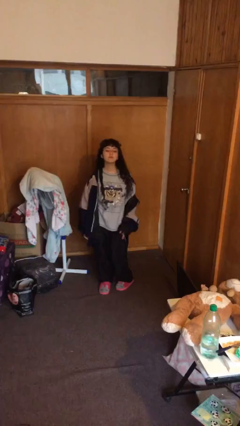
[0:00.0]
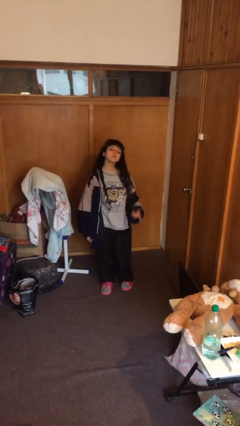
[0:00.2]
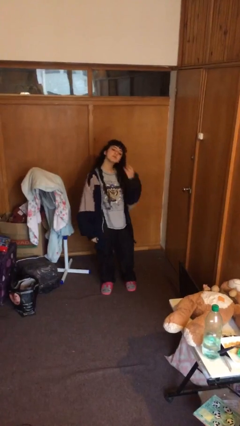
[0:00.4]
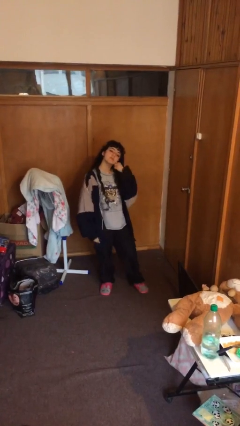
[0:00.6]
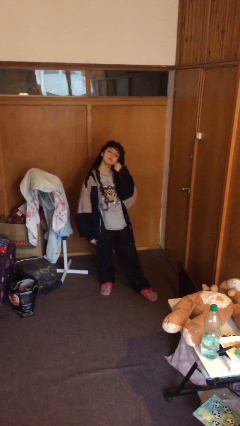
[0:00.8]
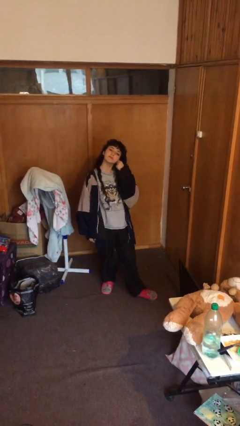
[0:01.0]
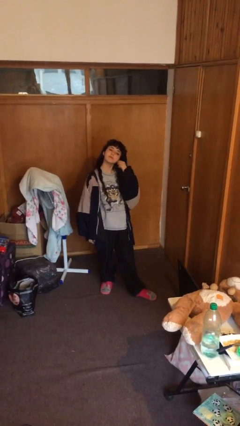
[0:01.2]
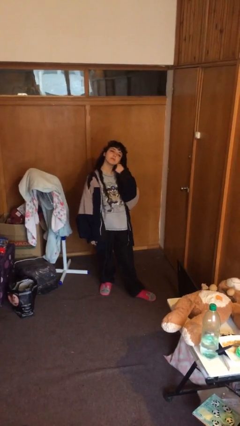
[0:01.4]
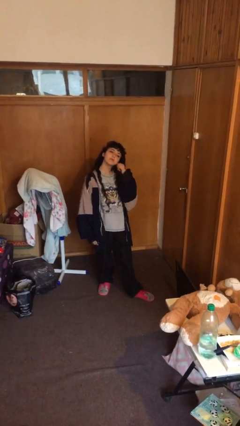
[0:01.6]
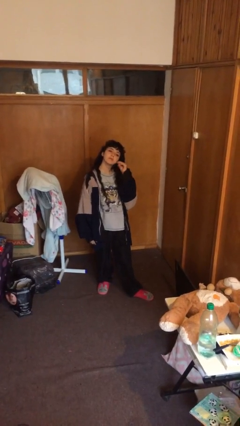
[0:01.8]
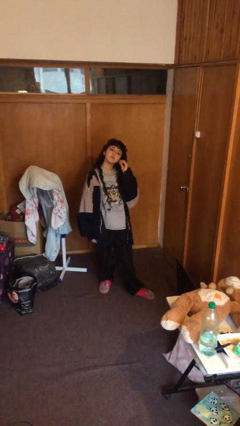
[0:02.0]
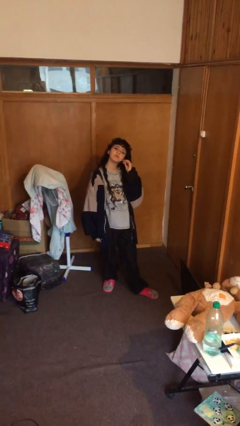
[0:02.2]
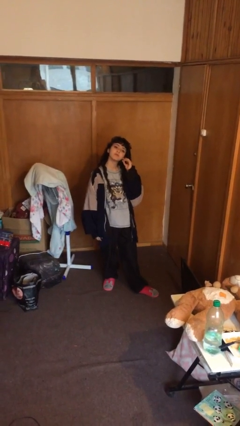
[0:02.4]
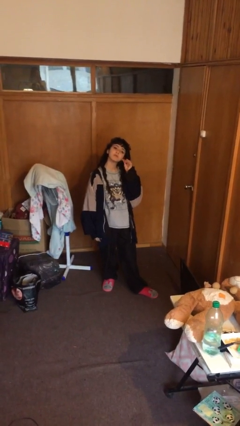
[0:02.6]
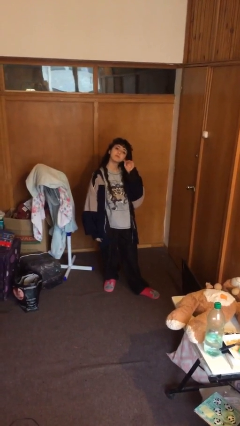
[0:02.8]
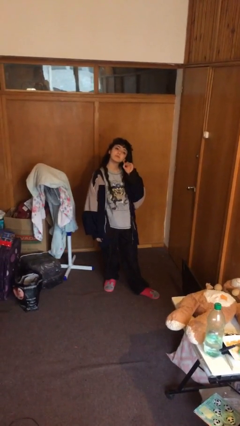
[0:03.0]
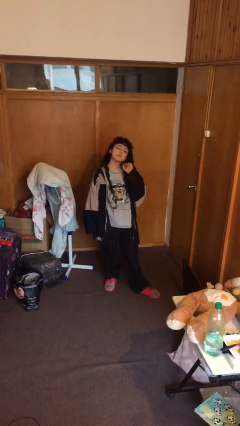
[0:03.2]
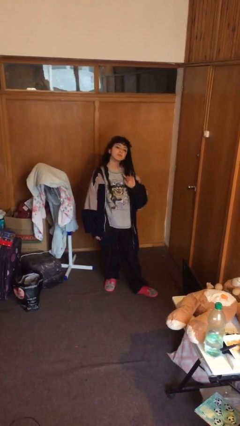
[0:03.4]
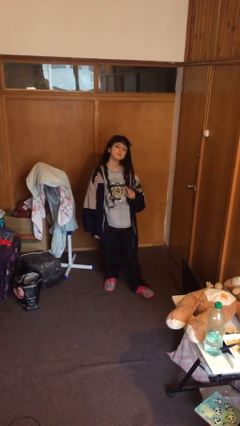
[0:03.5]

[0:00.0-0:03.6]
person touches earlobe

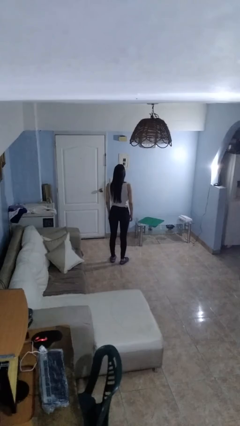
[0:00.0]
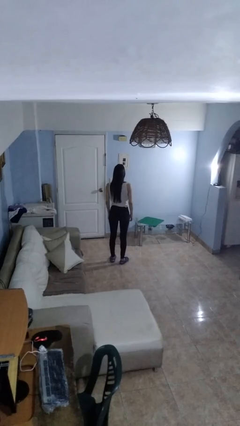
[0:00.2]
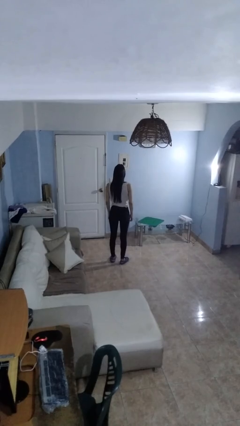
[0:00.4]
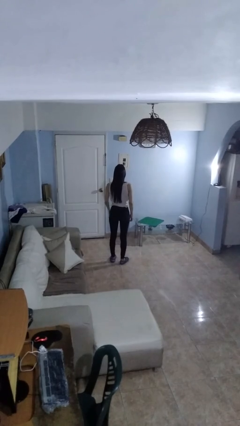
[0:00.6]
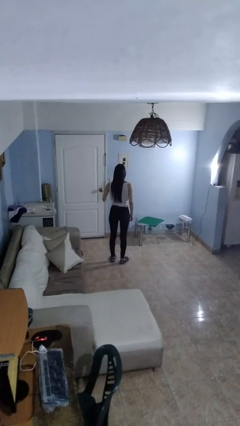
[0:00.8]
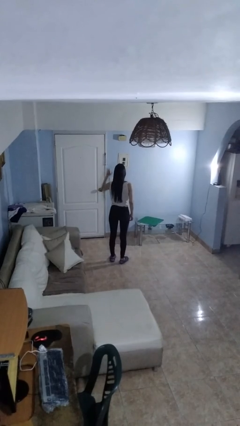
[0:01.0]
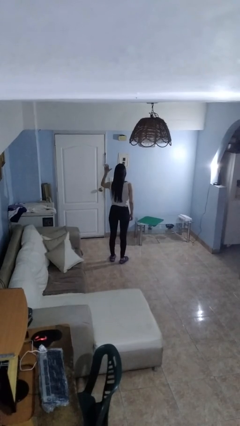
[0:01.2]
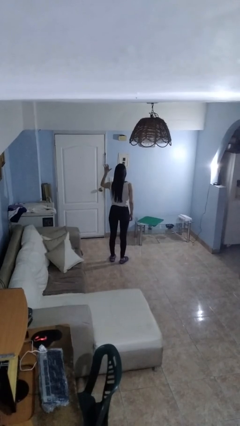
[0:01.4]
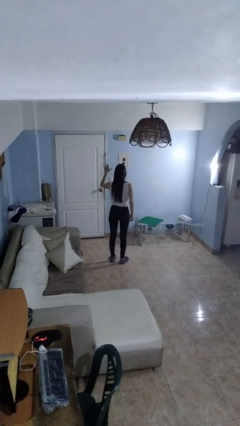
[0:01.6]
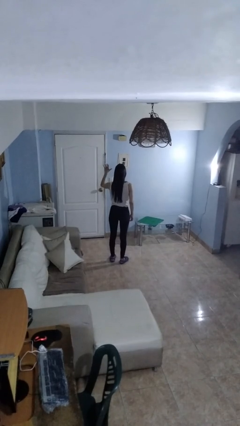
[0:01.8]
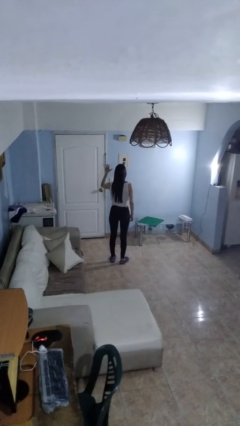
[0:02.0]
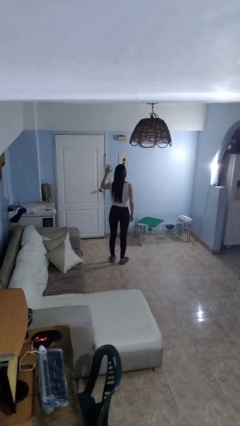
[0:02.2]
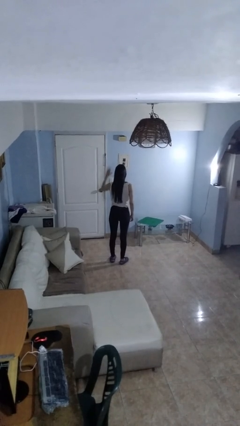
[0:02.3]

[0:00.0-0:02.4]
person gestures number five

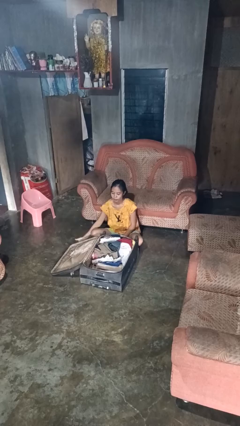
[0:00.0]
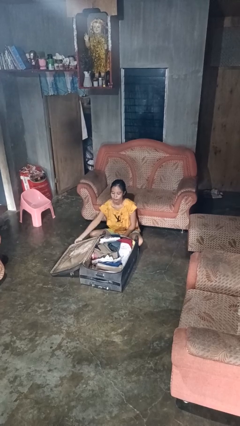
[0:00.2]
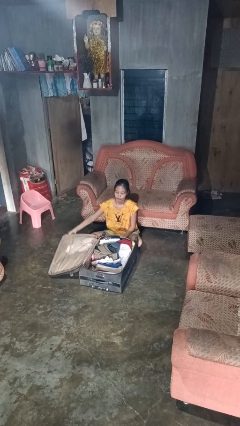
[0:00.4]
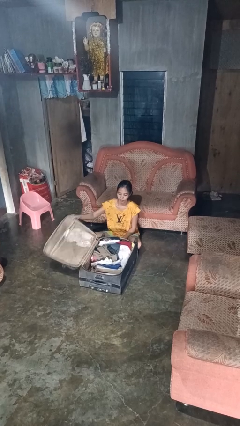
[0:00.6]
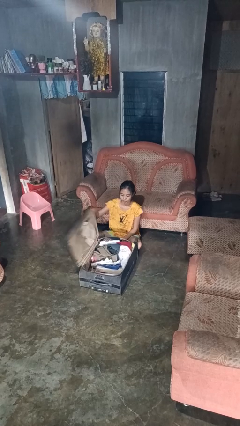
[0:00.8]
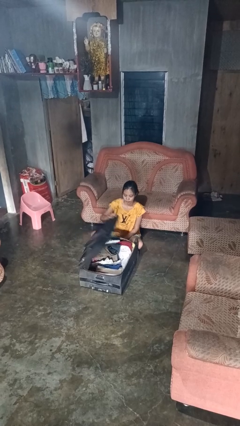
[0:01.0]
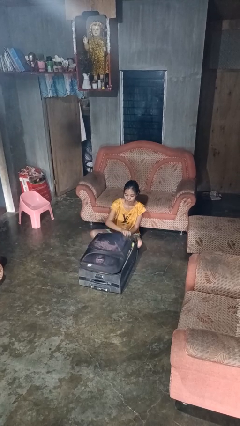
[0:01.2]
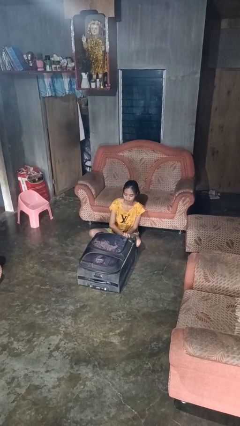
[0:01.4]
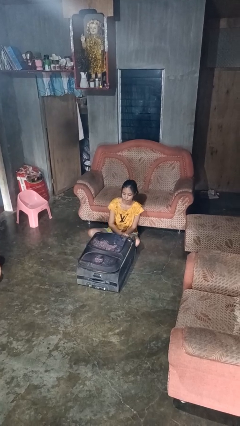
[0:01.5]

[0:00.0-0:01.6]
person closes suitcase

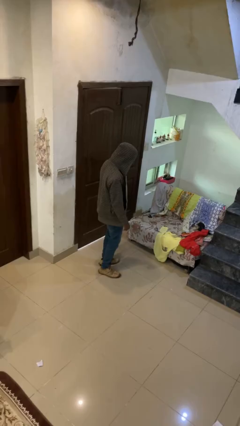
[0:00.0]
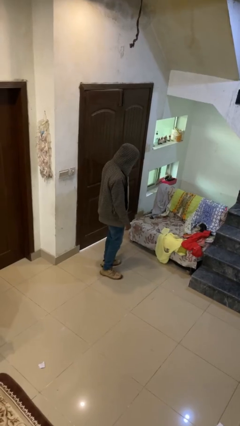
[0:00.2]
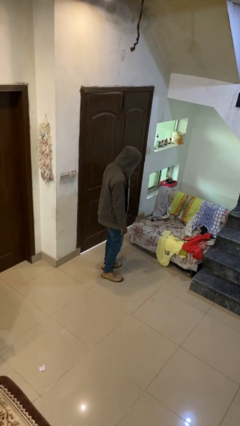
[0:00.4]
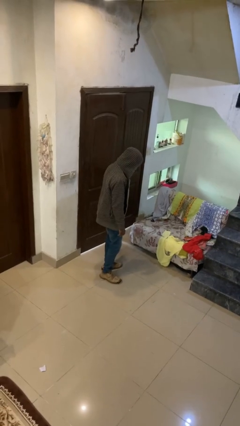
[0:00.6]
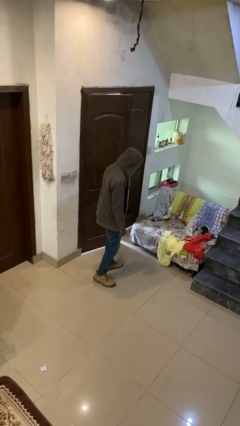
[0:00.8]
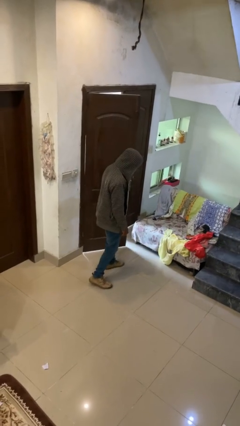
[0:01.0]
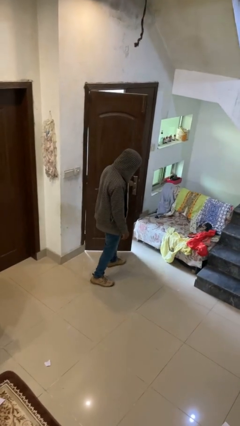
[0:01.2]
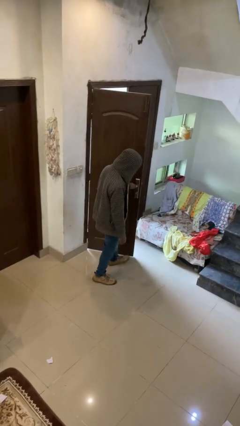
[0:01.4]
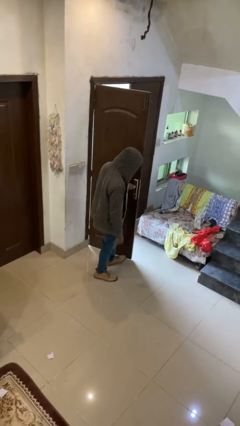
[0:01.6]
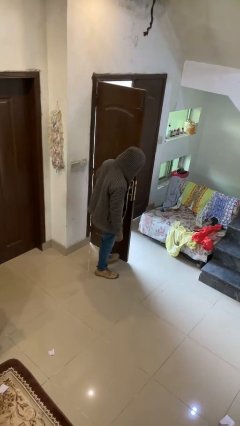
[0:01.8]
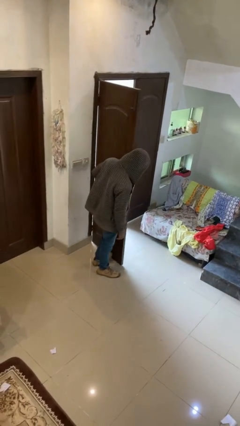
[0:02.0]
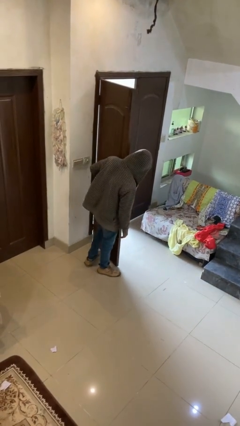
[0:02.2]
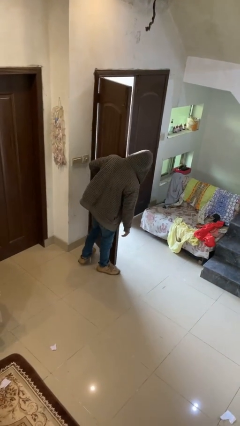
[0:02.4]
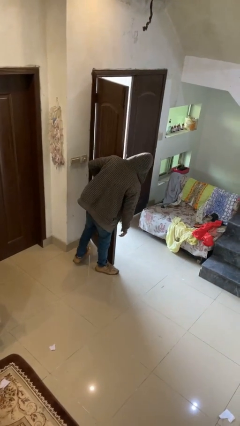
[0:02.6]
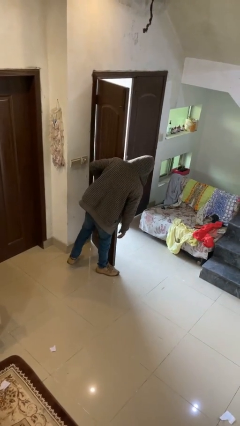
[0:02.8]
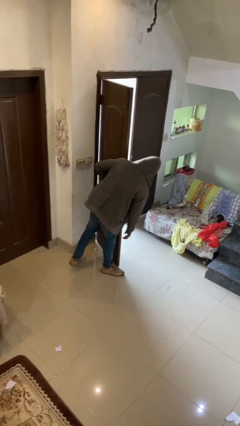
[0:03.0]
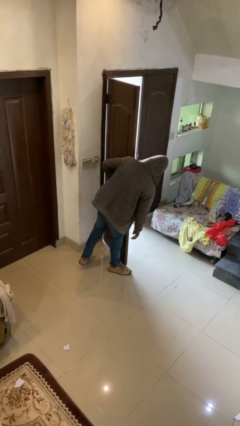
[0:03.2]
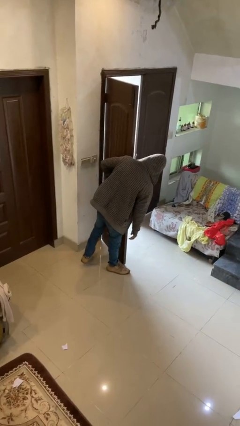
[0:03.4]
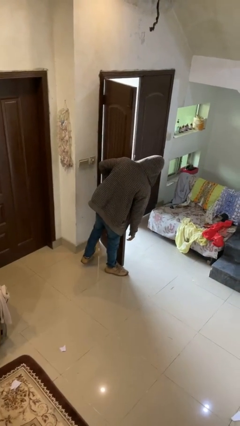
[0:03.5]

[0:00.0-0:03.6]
person opens facility door

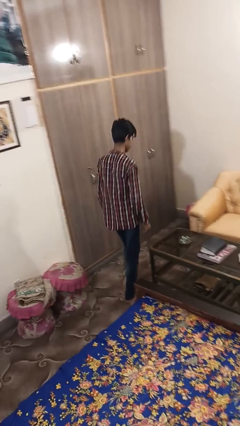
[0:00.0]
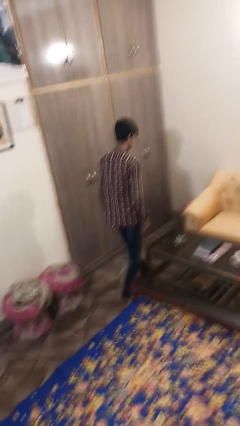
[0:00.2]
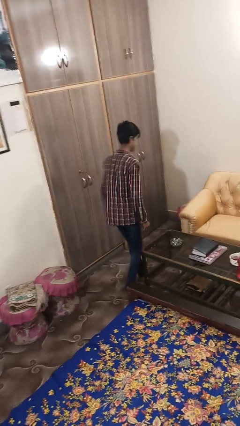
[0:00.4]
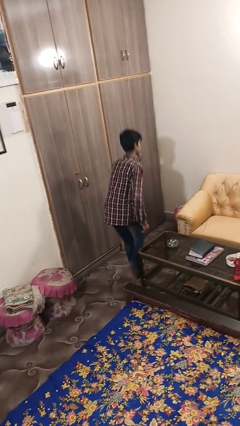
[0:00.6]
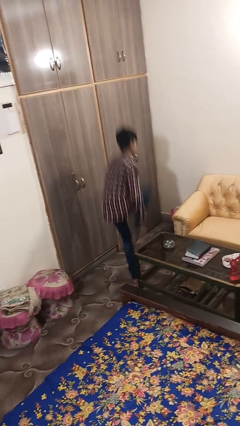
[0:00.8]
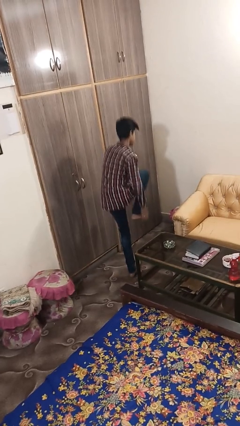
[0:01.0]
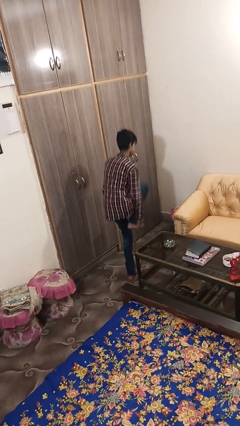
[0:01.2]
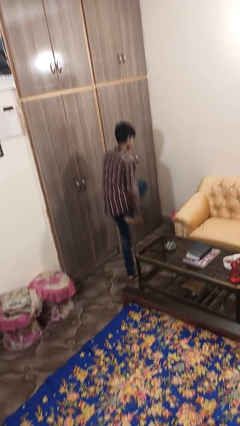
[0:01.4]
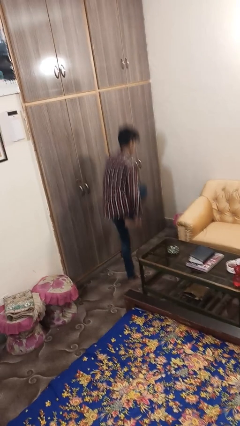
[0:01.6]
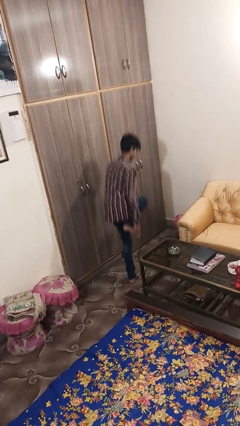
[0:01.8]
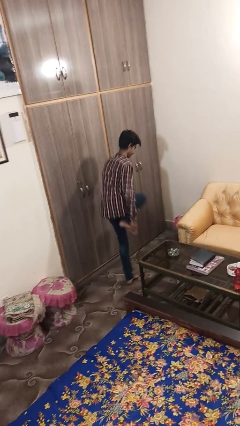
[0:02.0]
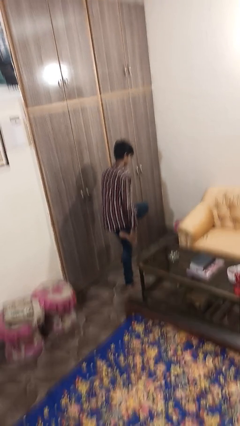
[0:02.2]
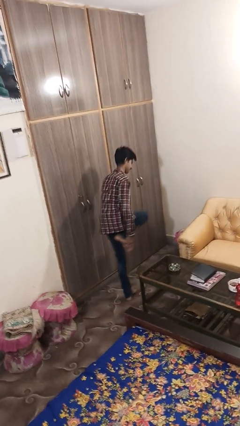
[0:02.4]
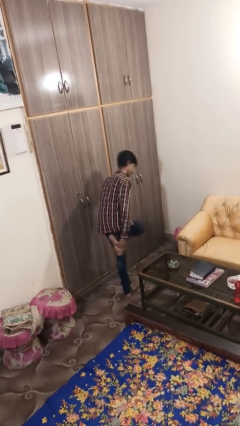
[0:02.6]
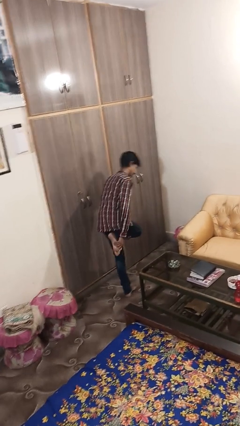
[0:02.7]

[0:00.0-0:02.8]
person bumps into table

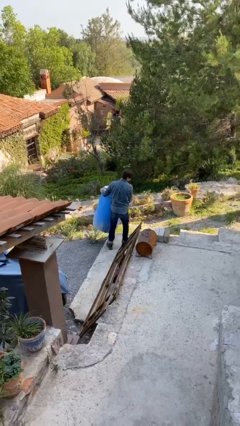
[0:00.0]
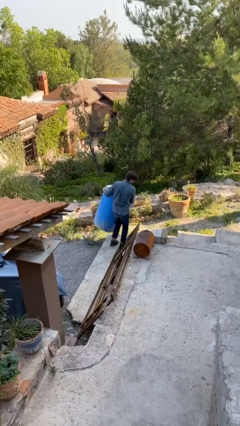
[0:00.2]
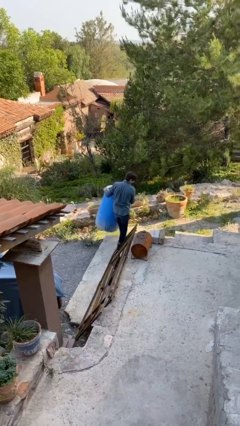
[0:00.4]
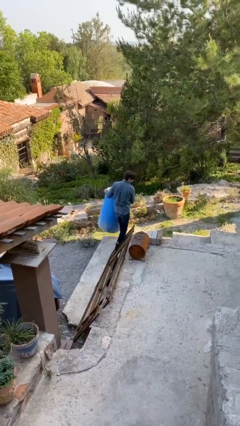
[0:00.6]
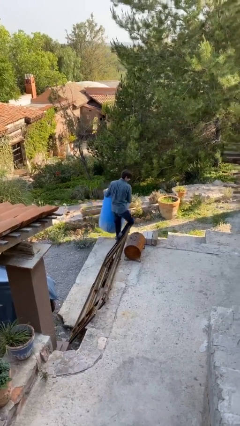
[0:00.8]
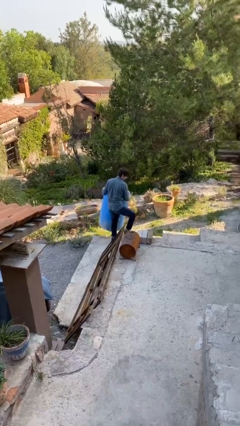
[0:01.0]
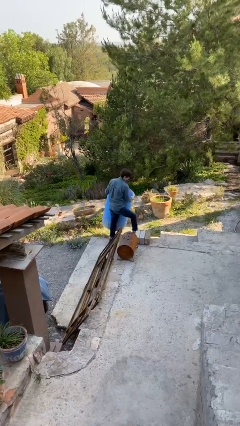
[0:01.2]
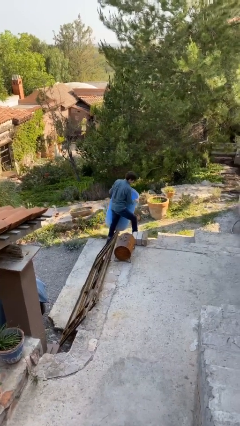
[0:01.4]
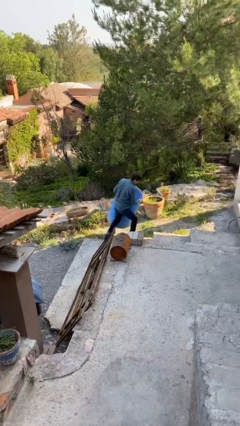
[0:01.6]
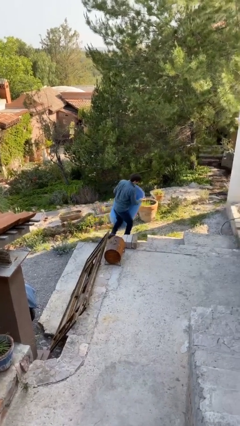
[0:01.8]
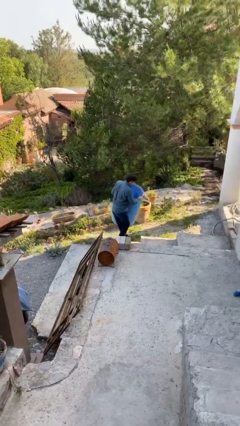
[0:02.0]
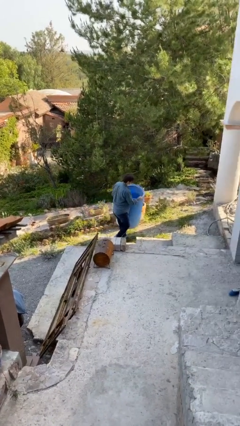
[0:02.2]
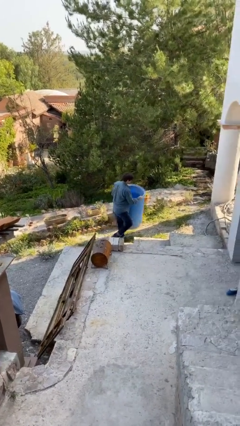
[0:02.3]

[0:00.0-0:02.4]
person carries heavy object

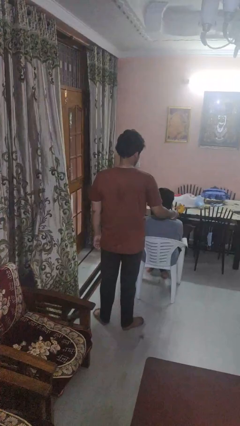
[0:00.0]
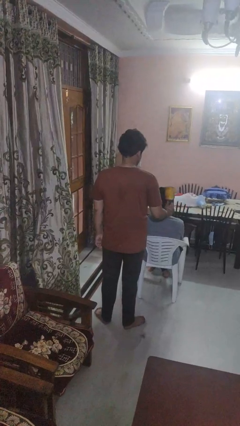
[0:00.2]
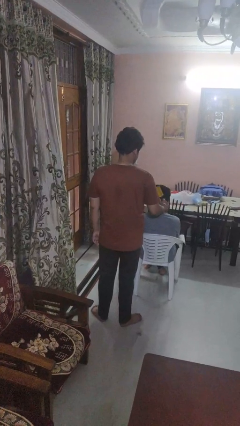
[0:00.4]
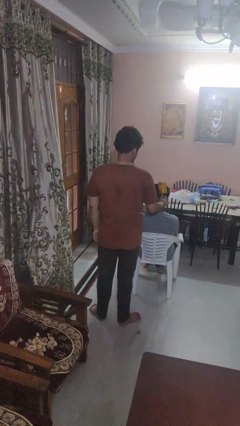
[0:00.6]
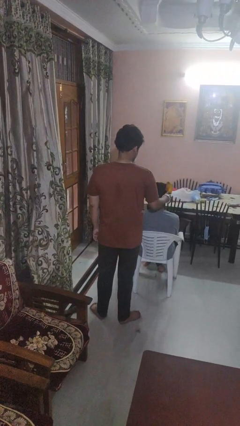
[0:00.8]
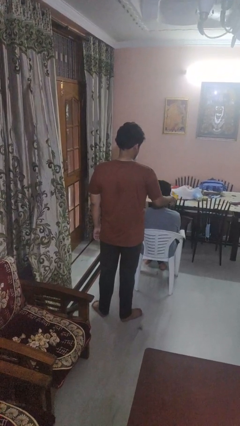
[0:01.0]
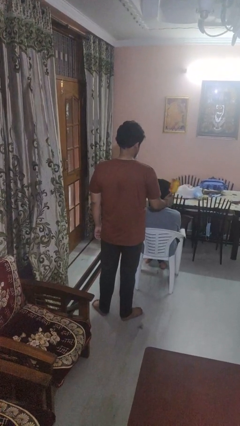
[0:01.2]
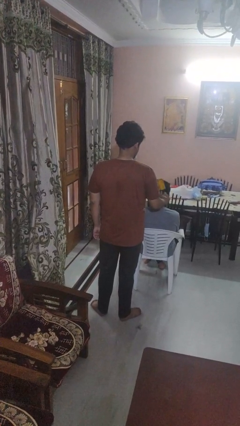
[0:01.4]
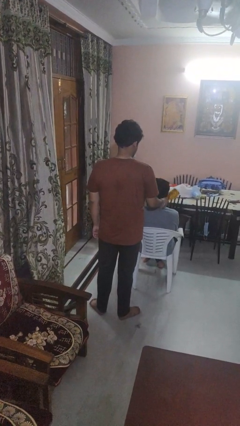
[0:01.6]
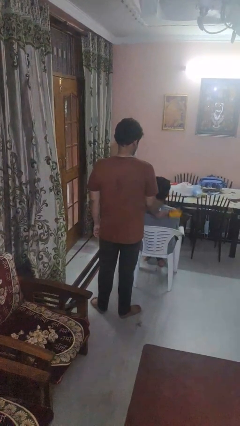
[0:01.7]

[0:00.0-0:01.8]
person brushes hair of person
